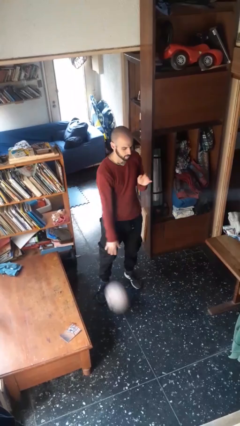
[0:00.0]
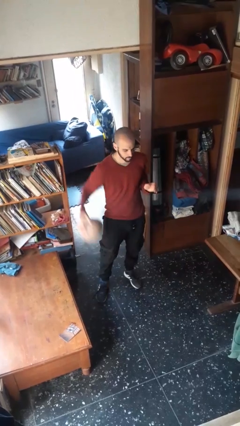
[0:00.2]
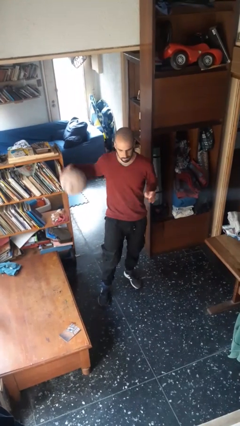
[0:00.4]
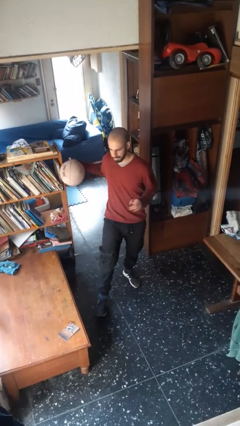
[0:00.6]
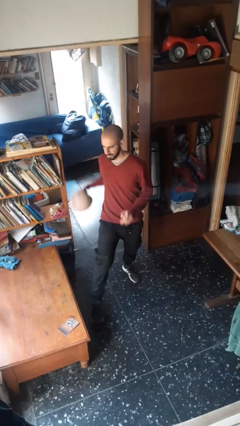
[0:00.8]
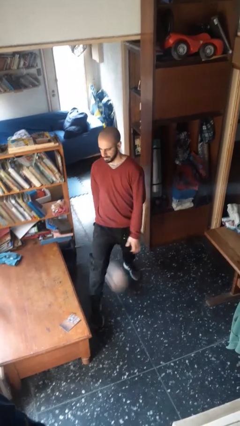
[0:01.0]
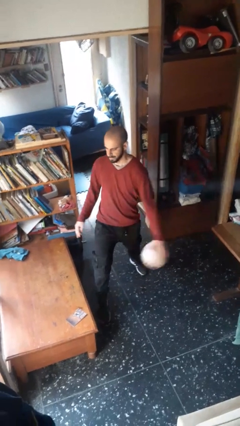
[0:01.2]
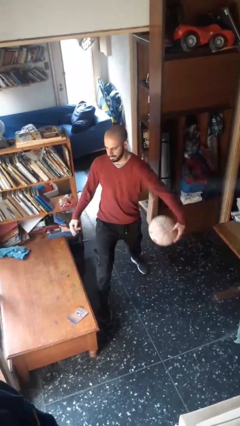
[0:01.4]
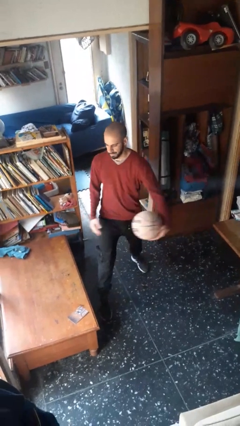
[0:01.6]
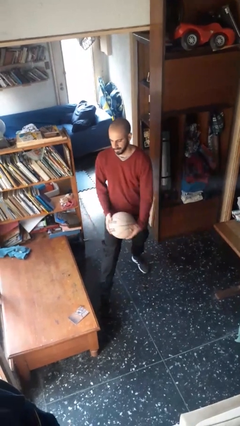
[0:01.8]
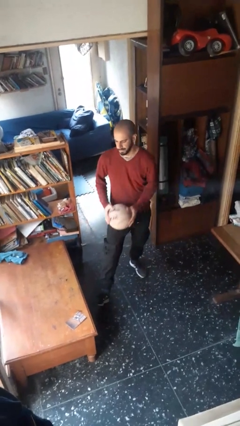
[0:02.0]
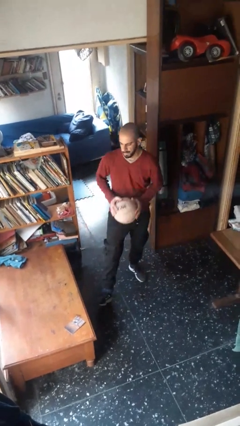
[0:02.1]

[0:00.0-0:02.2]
person bounces ball on floor

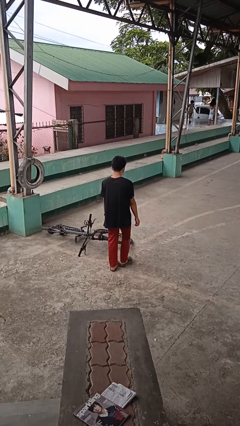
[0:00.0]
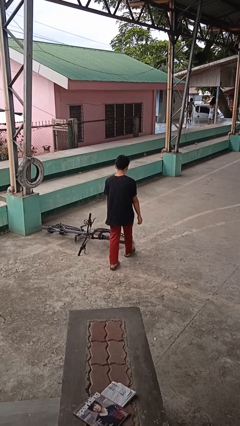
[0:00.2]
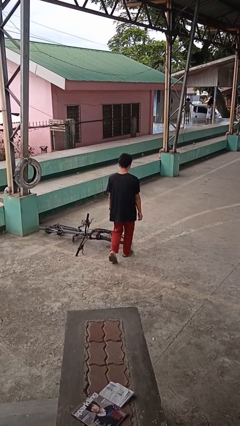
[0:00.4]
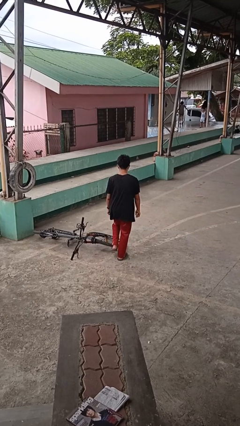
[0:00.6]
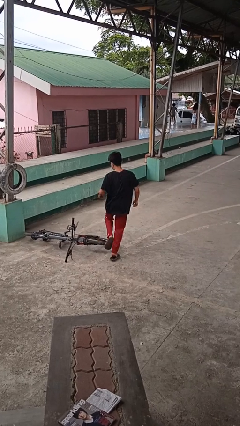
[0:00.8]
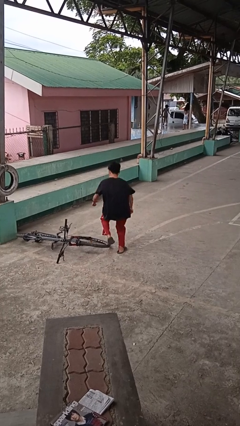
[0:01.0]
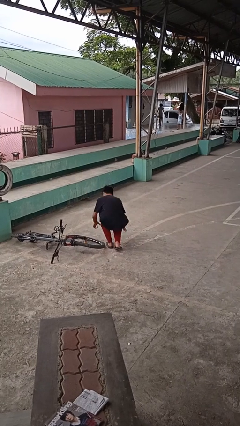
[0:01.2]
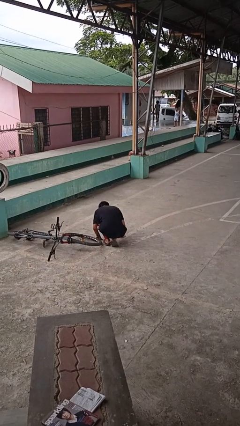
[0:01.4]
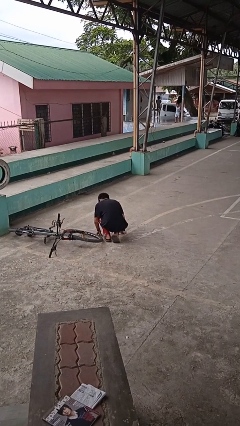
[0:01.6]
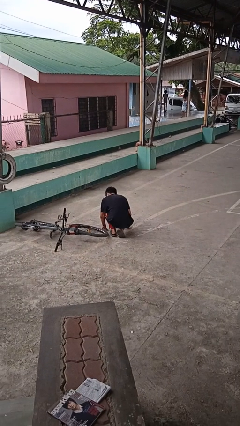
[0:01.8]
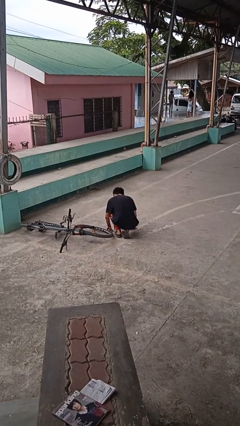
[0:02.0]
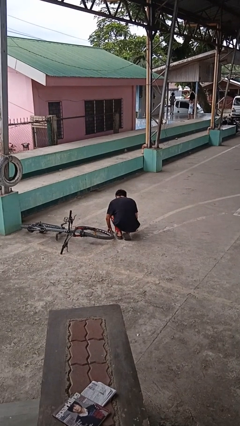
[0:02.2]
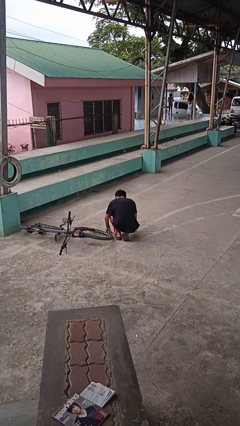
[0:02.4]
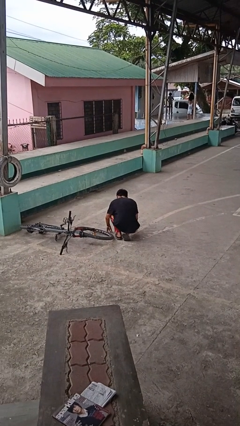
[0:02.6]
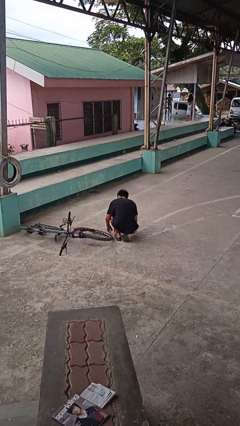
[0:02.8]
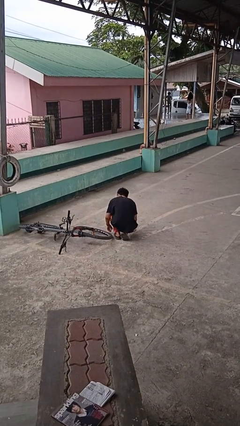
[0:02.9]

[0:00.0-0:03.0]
person trips on object on floor

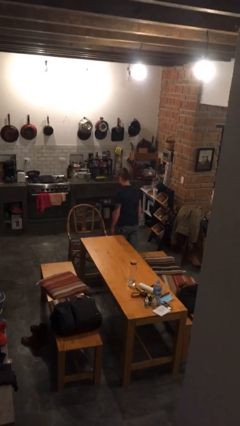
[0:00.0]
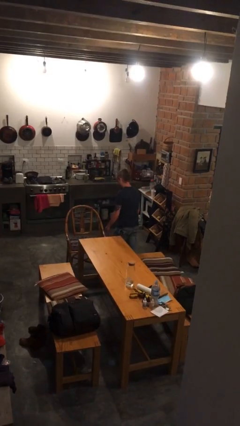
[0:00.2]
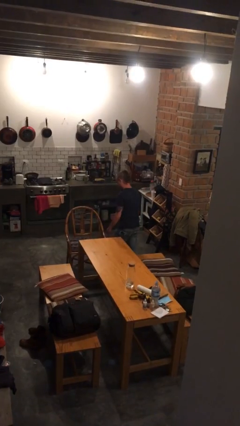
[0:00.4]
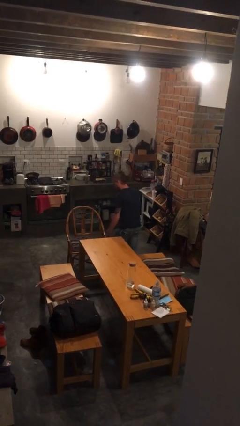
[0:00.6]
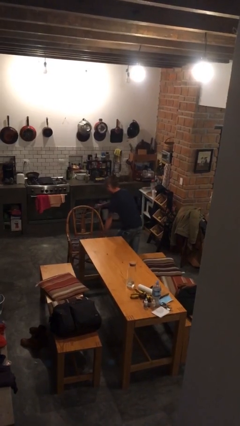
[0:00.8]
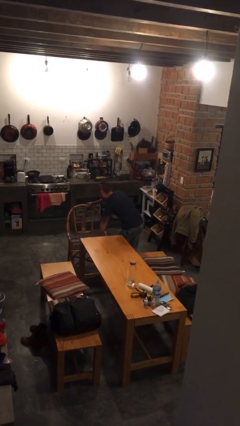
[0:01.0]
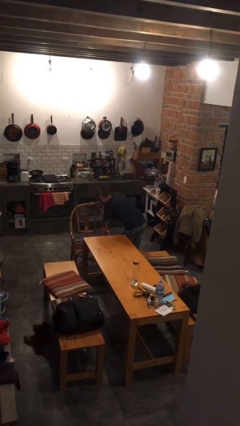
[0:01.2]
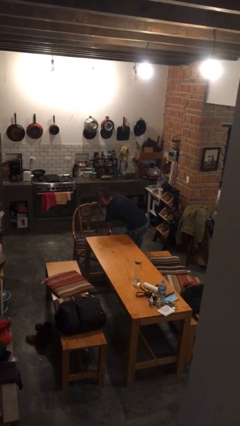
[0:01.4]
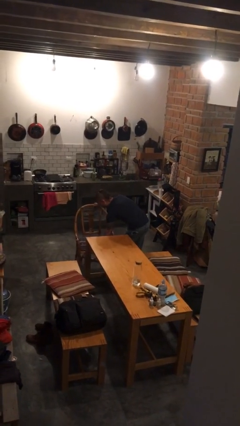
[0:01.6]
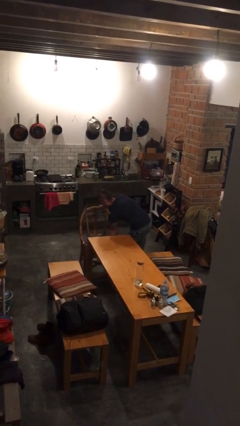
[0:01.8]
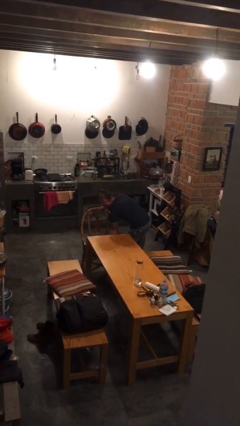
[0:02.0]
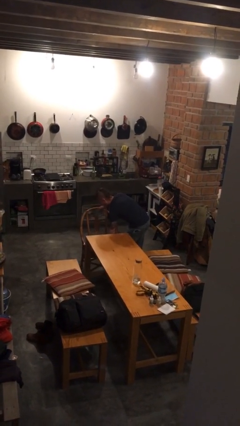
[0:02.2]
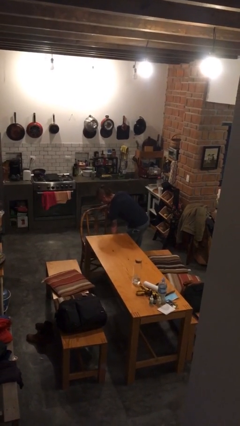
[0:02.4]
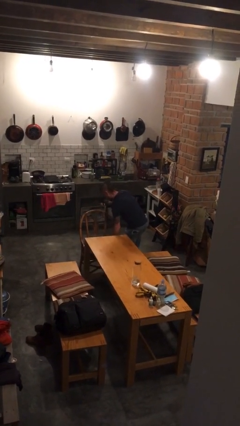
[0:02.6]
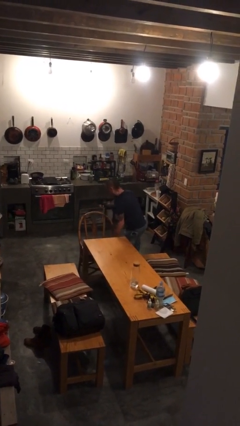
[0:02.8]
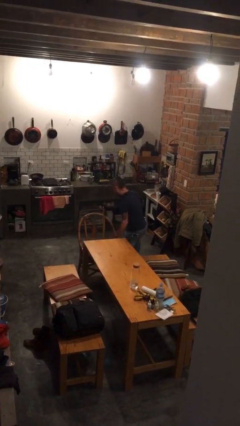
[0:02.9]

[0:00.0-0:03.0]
person pushes in chair

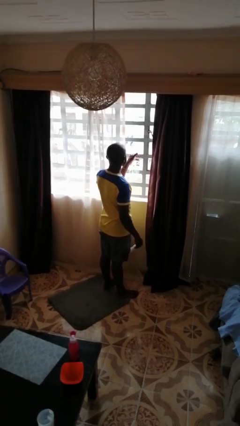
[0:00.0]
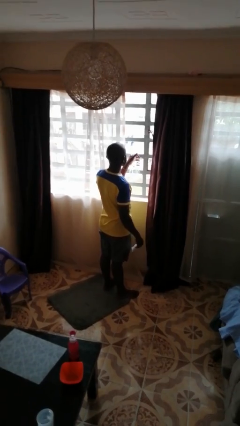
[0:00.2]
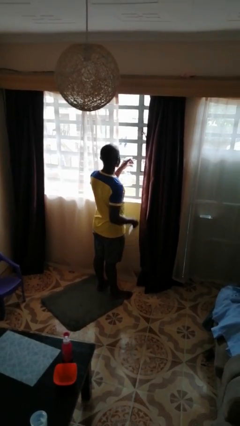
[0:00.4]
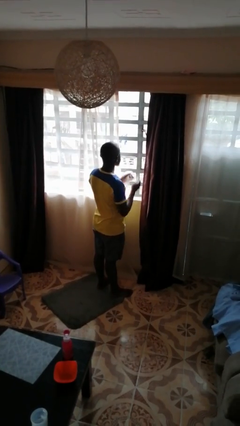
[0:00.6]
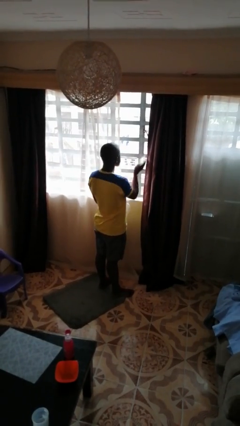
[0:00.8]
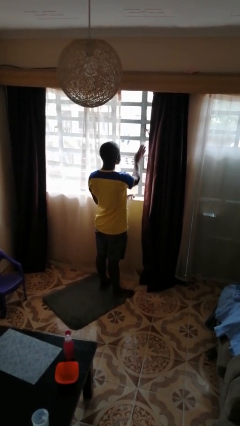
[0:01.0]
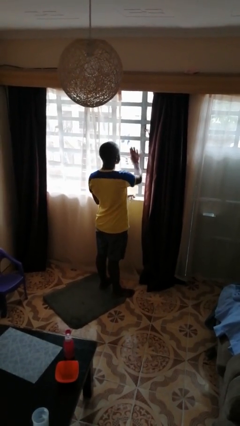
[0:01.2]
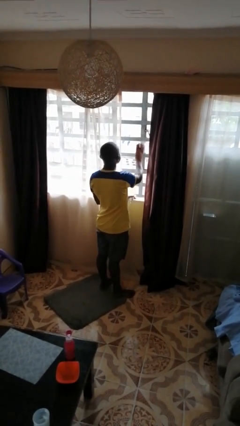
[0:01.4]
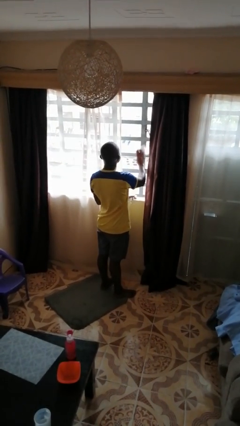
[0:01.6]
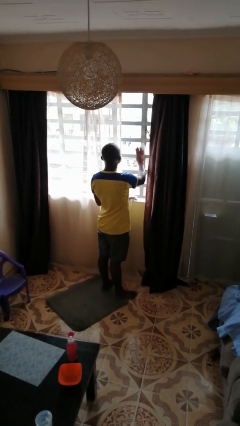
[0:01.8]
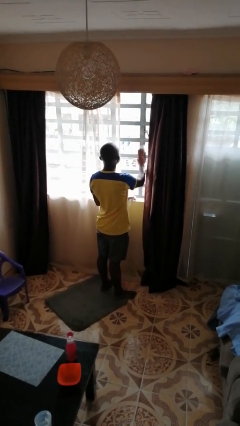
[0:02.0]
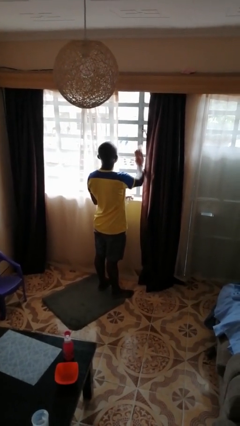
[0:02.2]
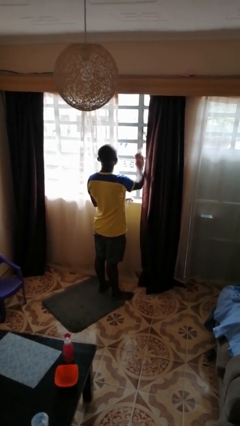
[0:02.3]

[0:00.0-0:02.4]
person washes window

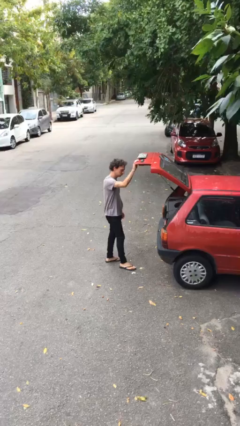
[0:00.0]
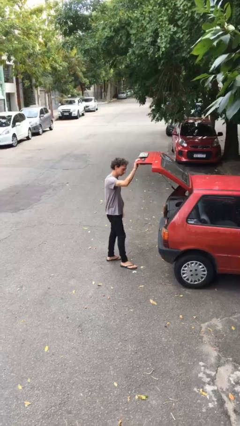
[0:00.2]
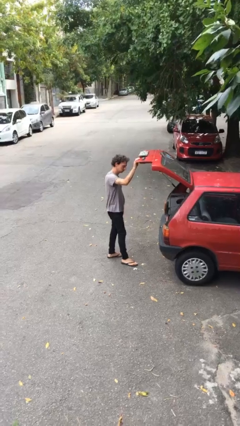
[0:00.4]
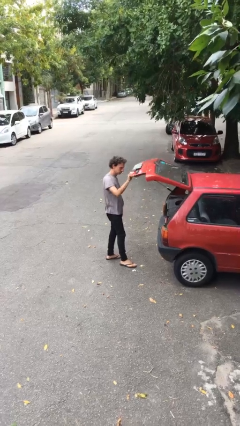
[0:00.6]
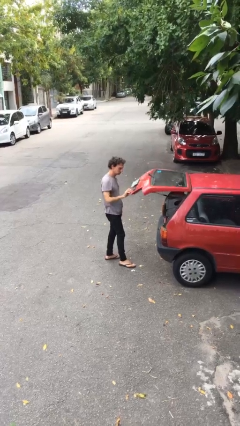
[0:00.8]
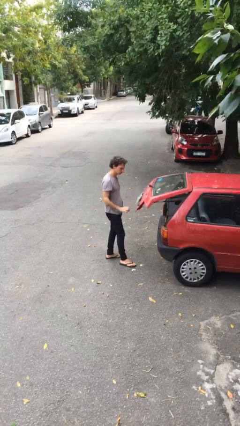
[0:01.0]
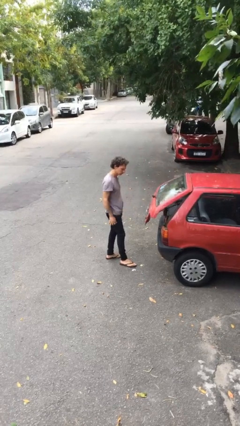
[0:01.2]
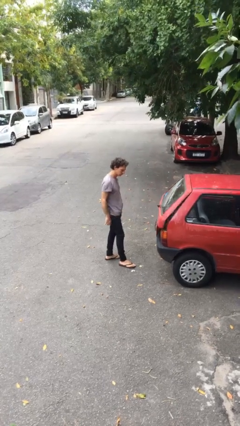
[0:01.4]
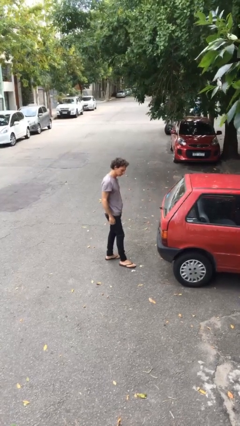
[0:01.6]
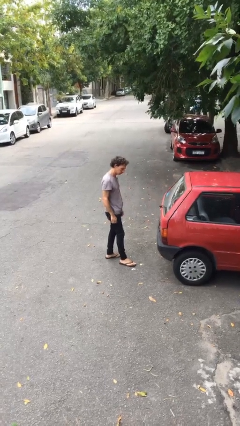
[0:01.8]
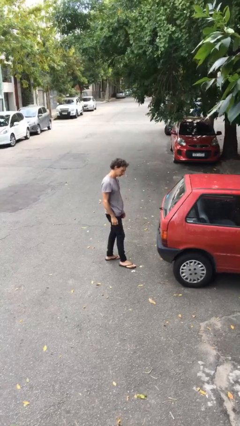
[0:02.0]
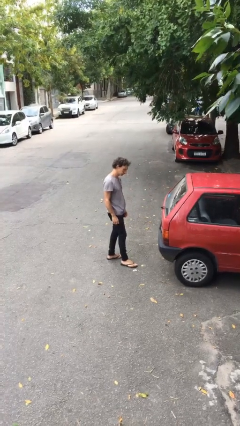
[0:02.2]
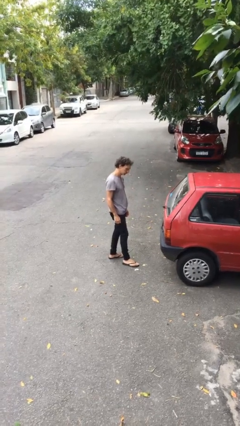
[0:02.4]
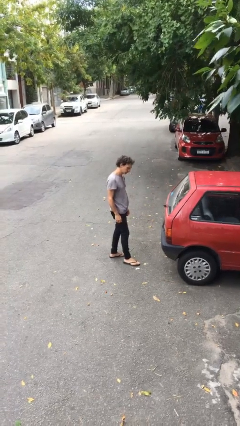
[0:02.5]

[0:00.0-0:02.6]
person closes car trunk

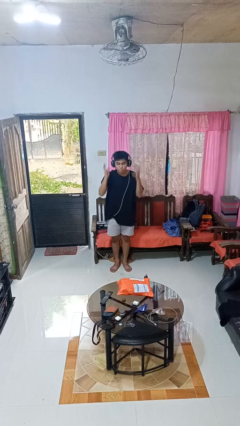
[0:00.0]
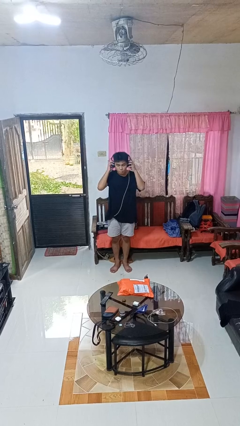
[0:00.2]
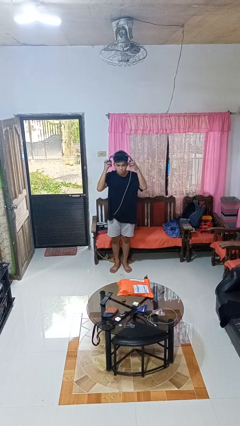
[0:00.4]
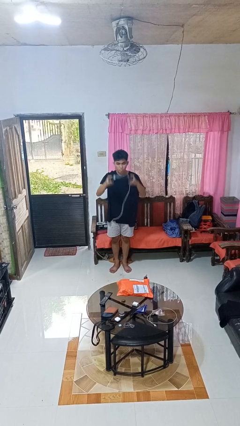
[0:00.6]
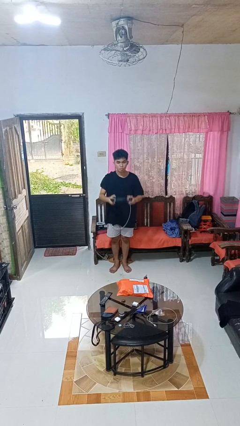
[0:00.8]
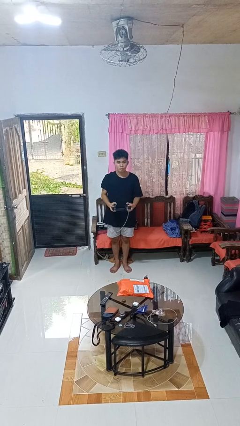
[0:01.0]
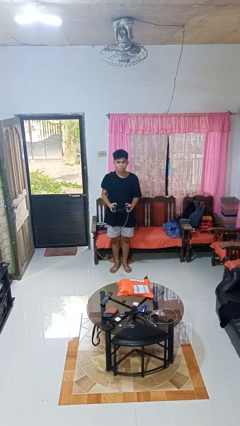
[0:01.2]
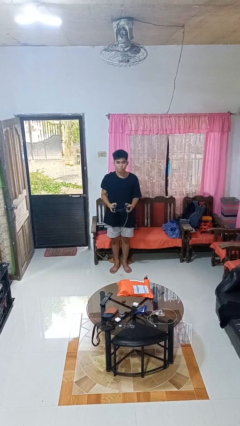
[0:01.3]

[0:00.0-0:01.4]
person takes off headphones

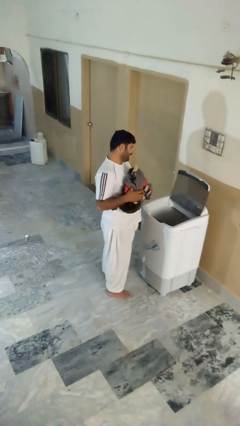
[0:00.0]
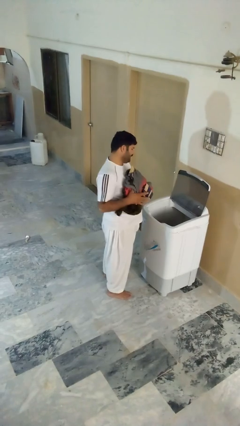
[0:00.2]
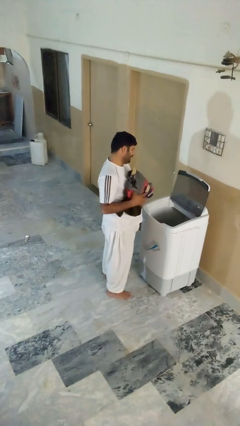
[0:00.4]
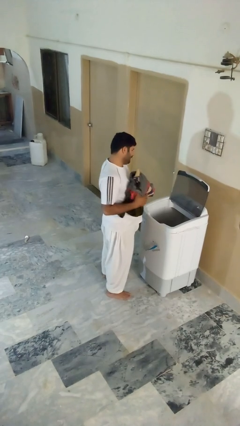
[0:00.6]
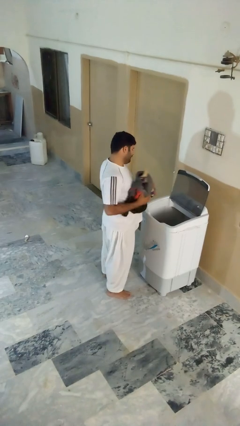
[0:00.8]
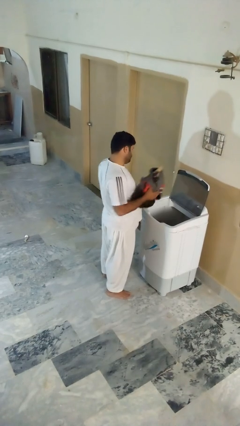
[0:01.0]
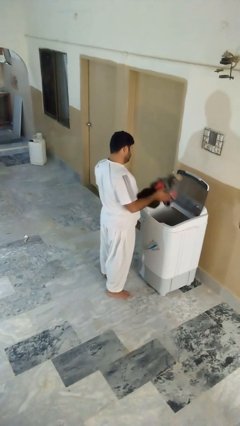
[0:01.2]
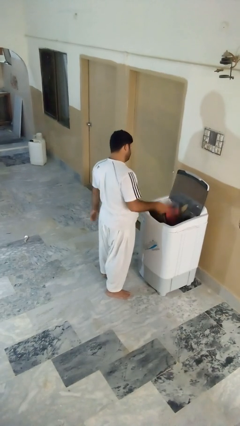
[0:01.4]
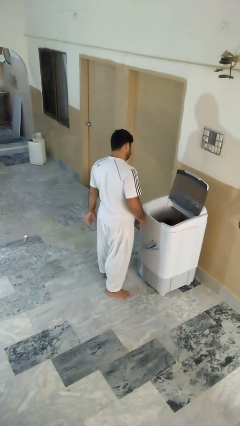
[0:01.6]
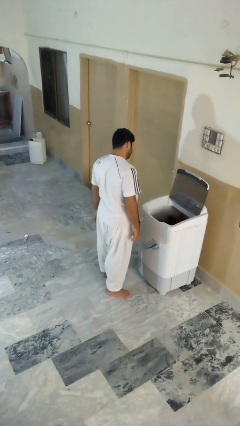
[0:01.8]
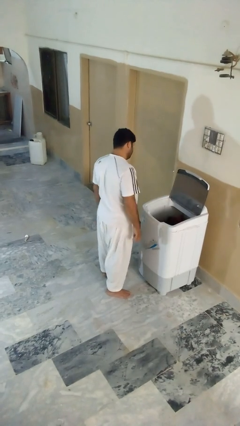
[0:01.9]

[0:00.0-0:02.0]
person loads clotheswasher
